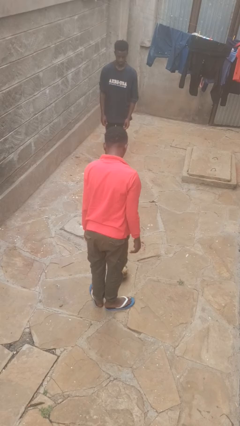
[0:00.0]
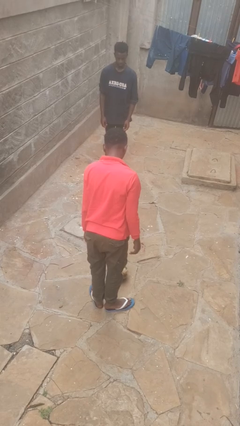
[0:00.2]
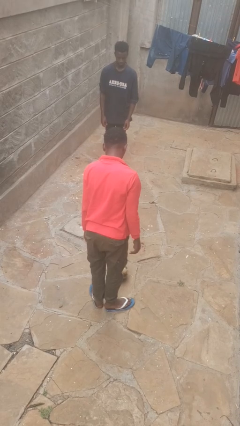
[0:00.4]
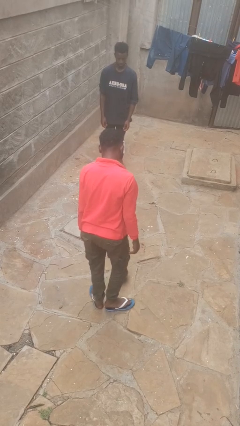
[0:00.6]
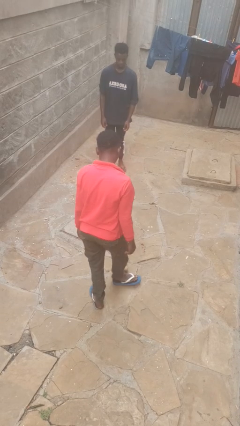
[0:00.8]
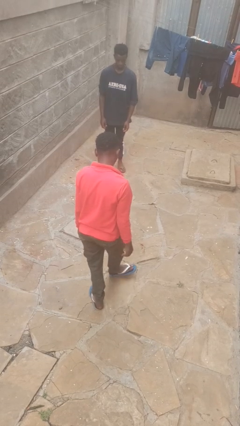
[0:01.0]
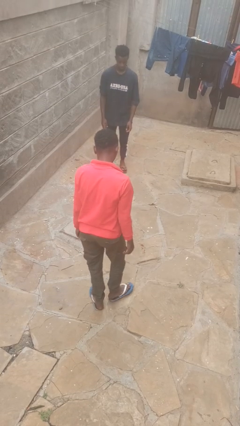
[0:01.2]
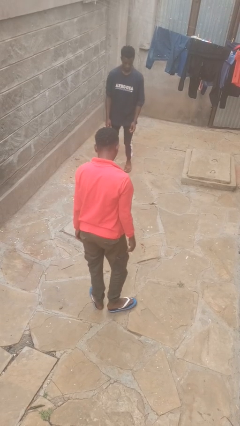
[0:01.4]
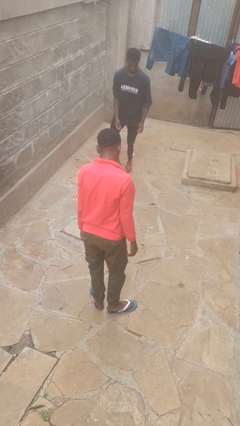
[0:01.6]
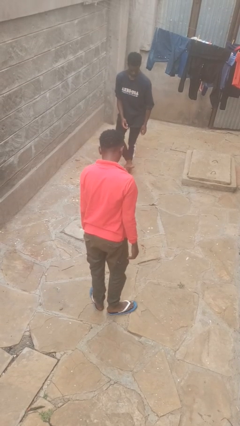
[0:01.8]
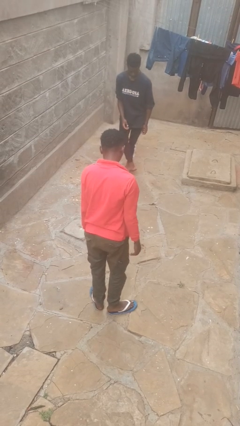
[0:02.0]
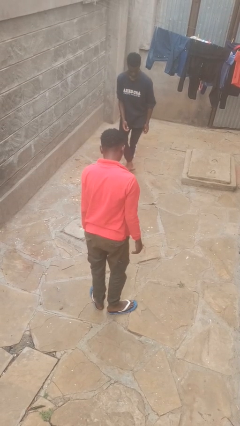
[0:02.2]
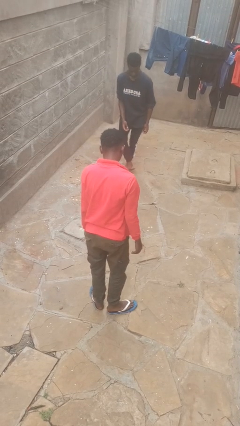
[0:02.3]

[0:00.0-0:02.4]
person kicks object to person

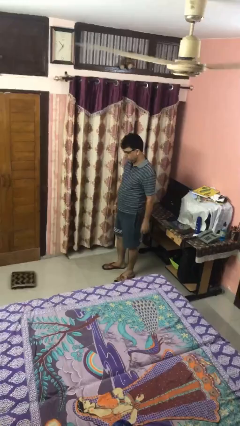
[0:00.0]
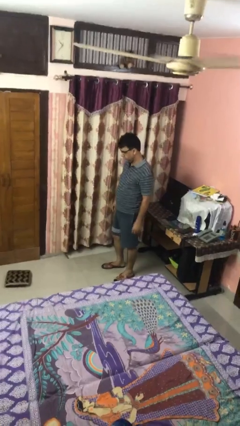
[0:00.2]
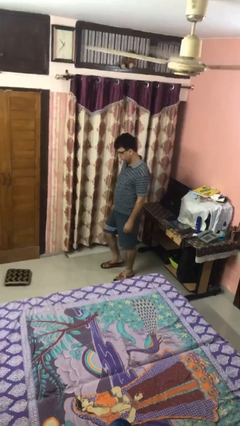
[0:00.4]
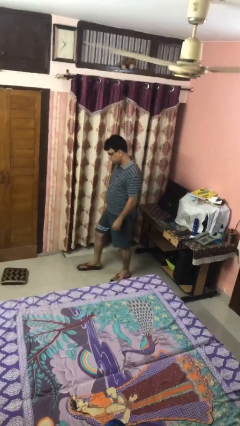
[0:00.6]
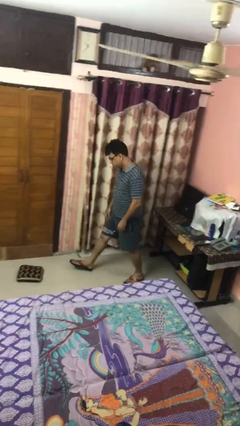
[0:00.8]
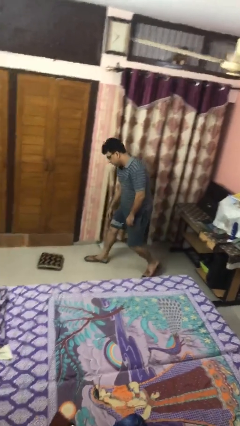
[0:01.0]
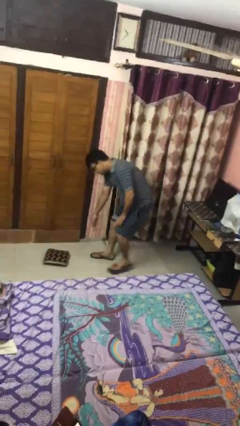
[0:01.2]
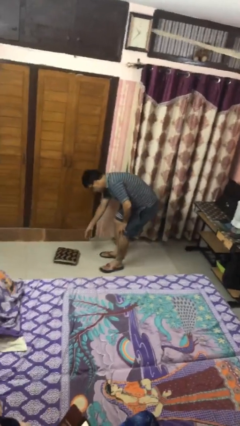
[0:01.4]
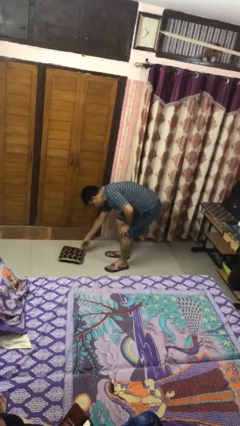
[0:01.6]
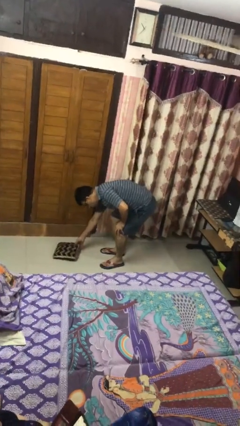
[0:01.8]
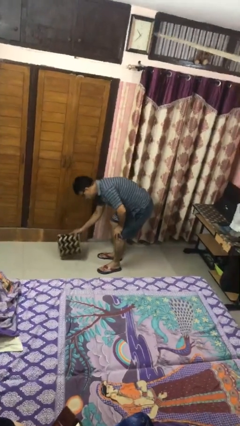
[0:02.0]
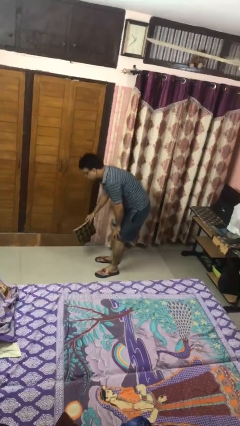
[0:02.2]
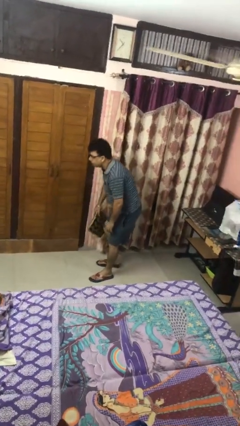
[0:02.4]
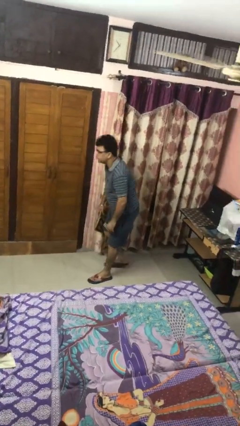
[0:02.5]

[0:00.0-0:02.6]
person picks up object from floor

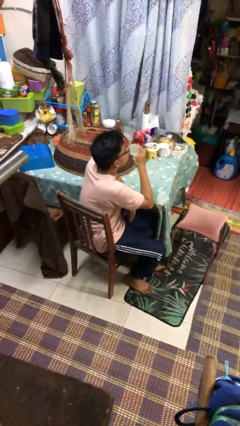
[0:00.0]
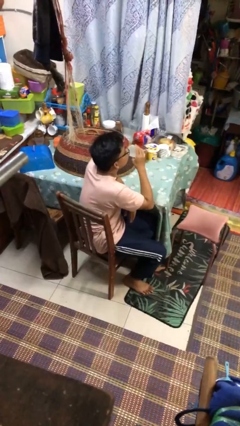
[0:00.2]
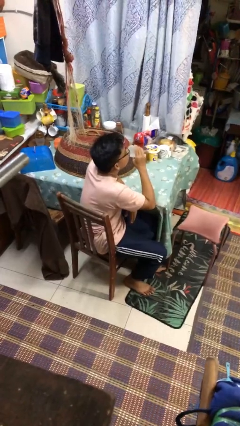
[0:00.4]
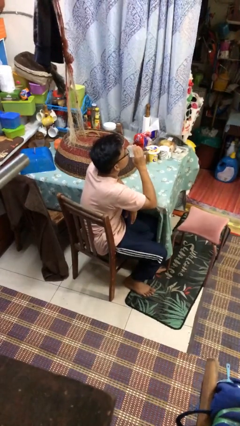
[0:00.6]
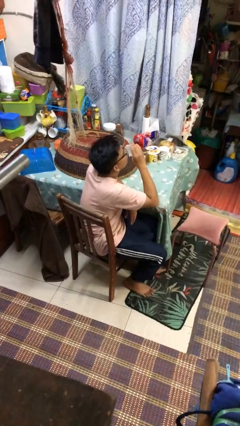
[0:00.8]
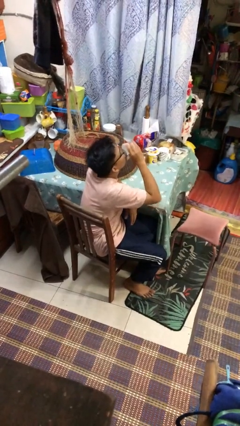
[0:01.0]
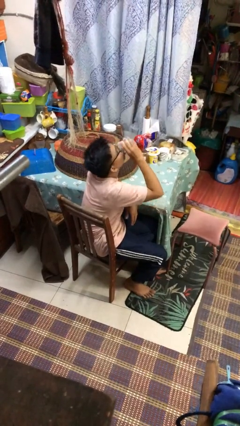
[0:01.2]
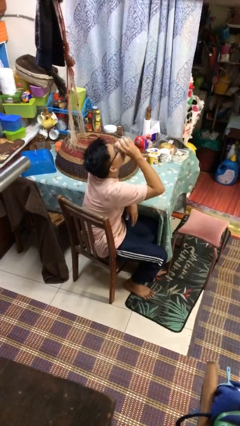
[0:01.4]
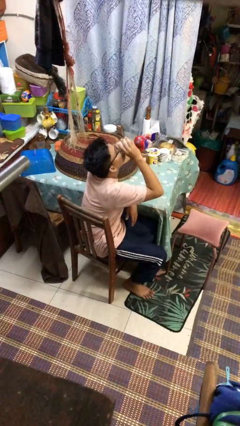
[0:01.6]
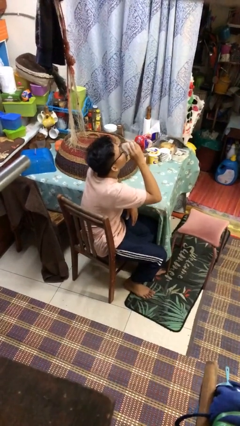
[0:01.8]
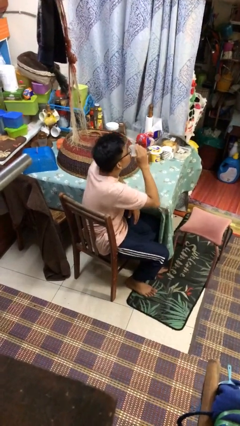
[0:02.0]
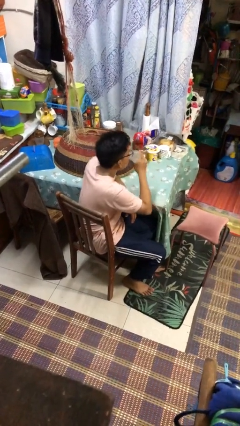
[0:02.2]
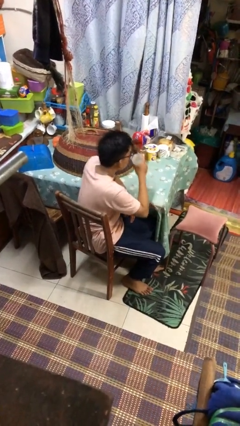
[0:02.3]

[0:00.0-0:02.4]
person drinks from shotglass

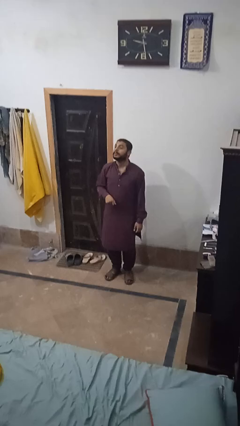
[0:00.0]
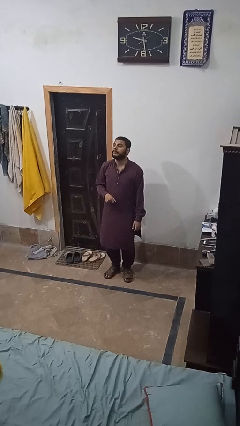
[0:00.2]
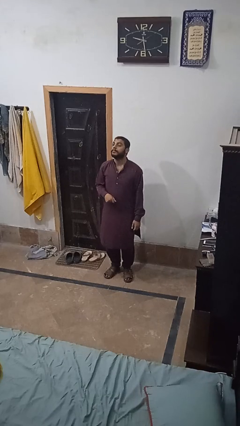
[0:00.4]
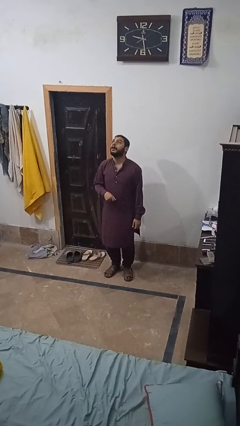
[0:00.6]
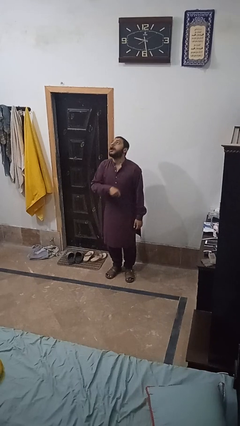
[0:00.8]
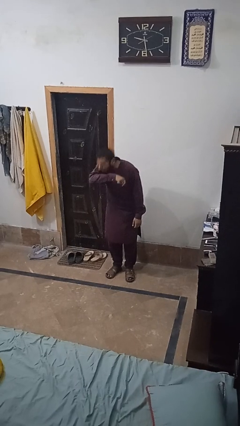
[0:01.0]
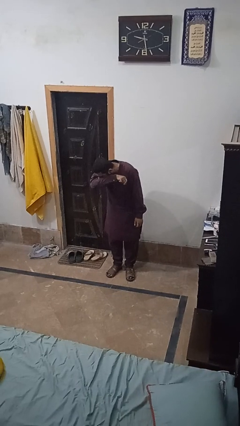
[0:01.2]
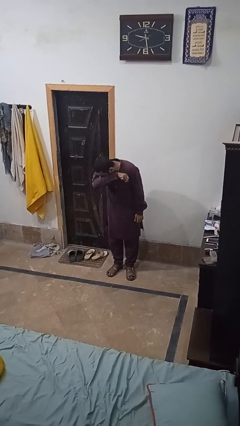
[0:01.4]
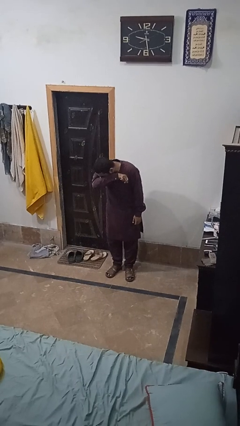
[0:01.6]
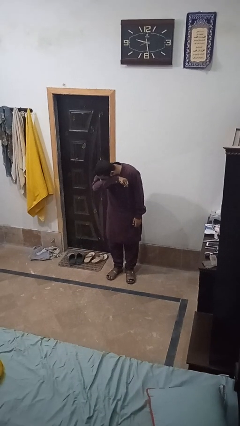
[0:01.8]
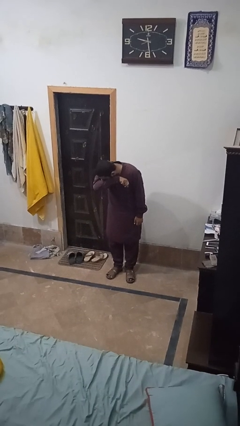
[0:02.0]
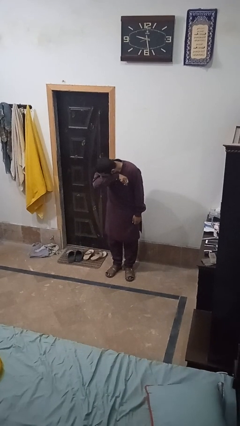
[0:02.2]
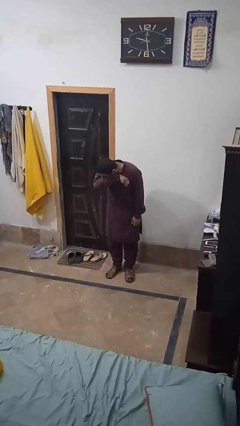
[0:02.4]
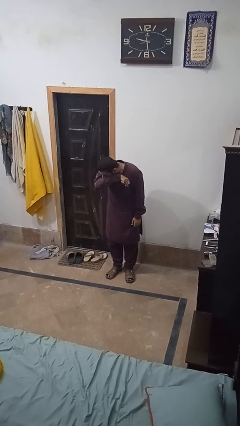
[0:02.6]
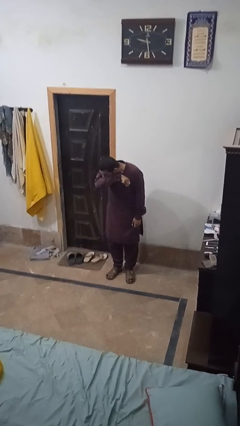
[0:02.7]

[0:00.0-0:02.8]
person sneezes into arm

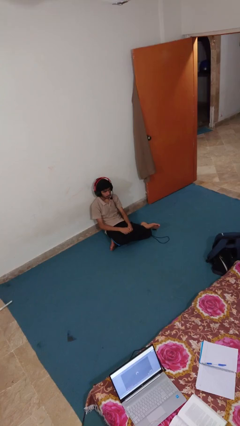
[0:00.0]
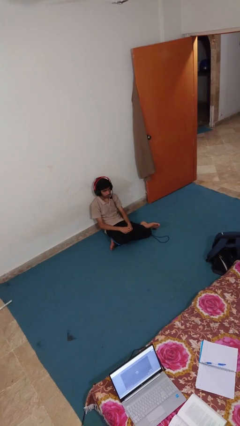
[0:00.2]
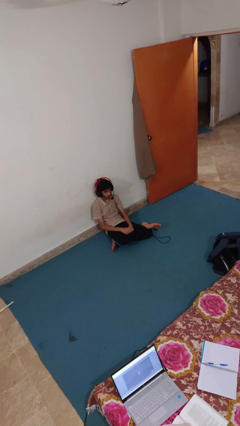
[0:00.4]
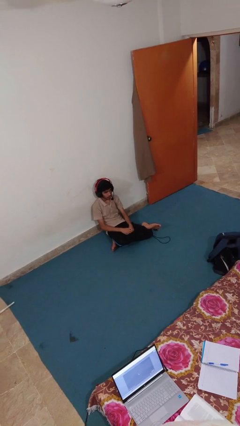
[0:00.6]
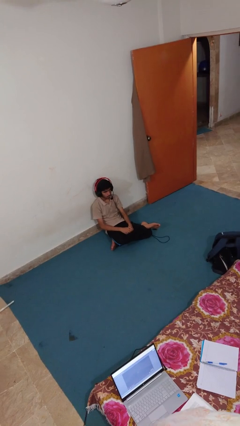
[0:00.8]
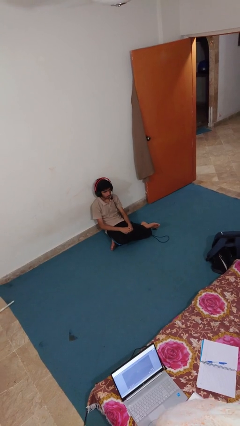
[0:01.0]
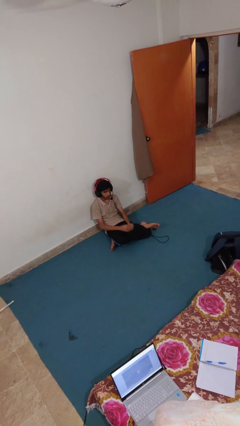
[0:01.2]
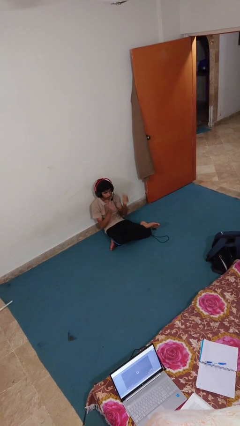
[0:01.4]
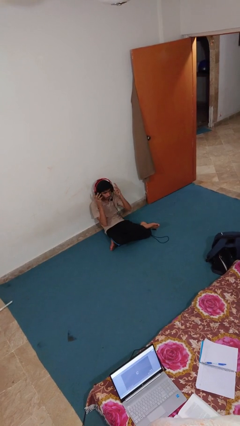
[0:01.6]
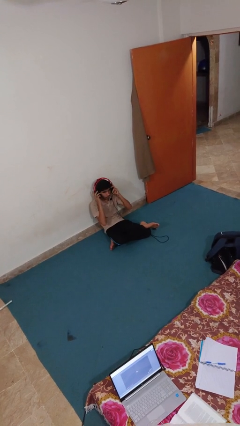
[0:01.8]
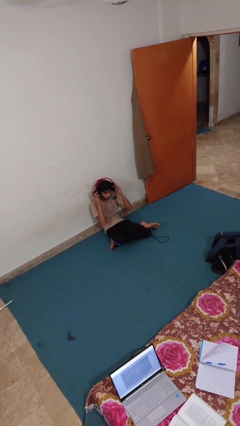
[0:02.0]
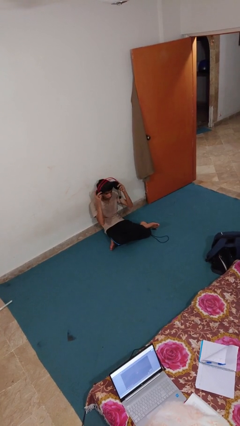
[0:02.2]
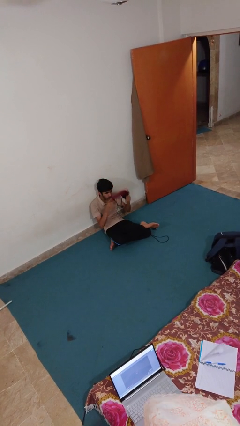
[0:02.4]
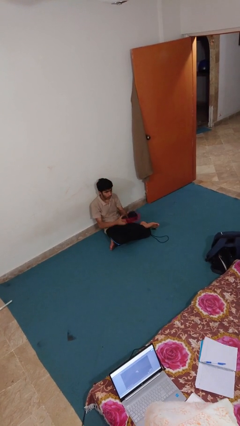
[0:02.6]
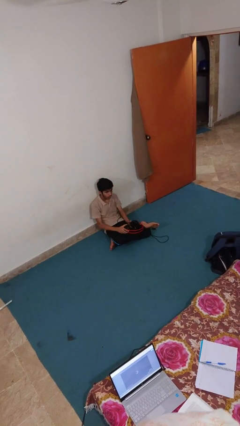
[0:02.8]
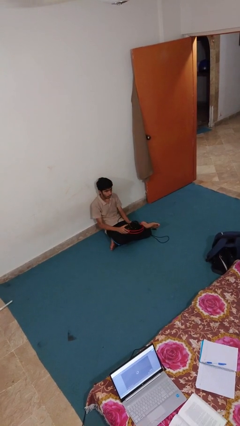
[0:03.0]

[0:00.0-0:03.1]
person takes off headphones

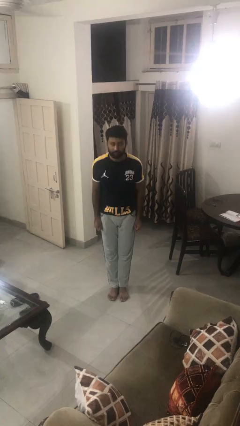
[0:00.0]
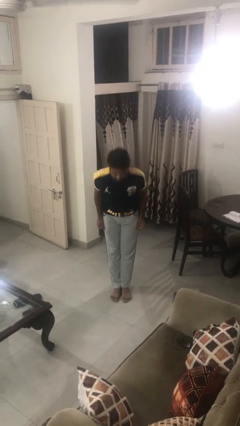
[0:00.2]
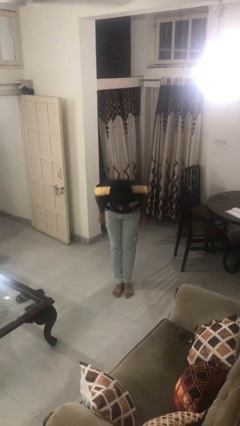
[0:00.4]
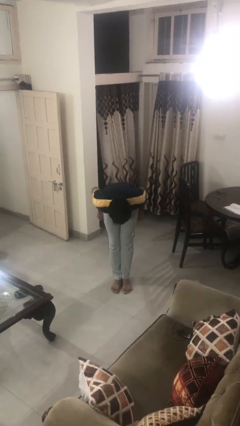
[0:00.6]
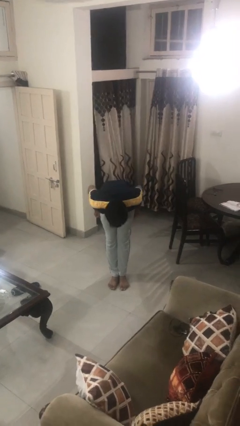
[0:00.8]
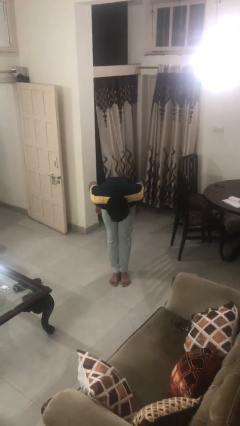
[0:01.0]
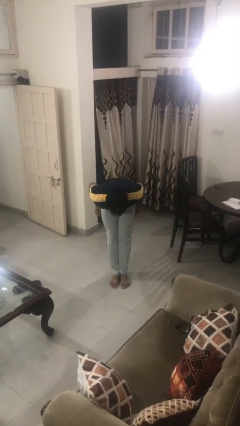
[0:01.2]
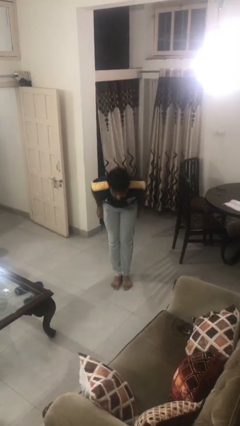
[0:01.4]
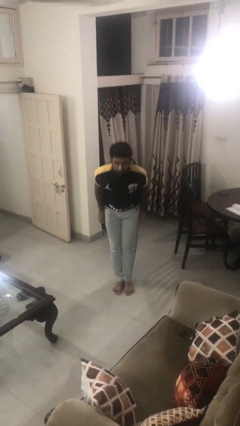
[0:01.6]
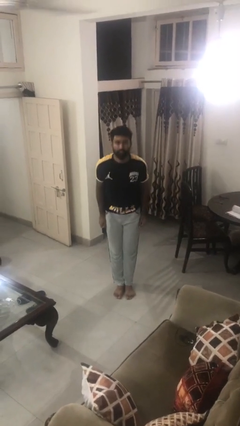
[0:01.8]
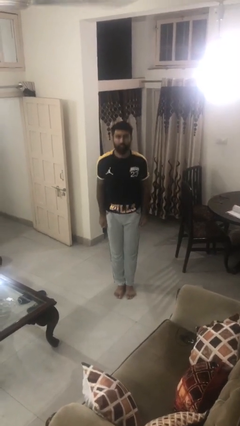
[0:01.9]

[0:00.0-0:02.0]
person bows

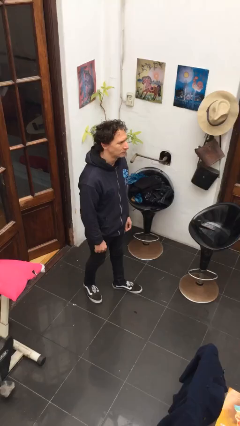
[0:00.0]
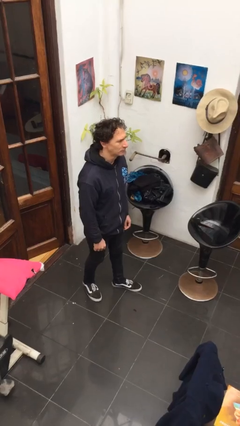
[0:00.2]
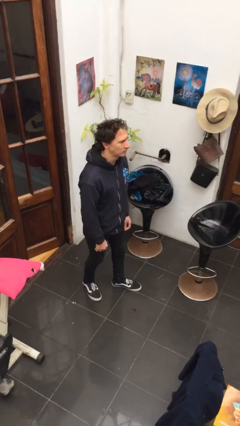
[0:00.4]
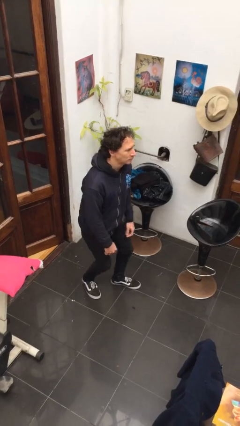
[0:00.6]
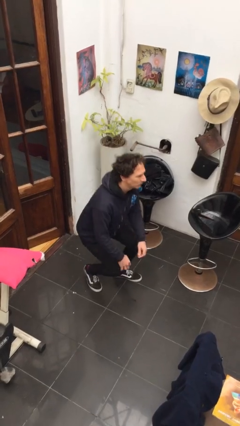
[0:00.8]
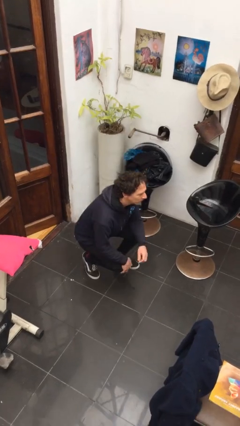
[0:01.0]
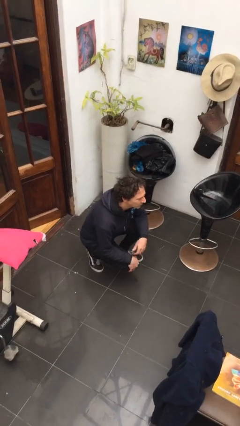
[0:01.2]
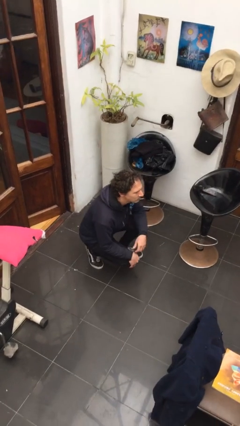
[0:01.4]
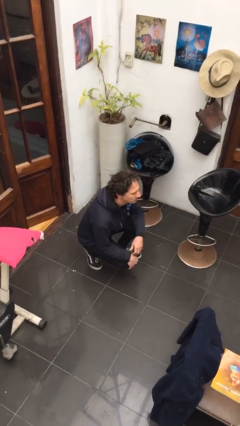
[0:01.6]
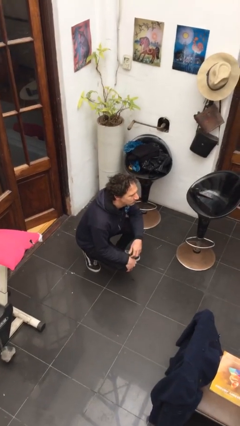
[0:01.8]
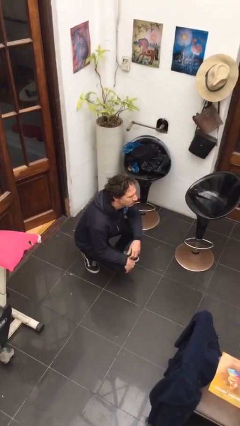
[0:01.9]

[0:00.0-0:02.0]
person squats

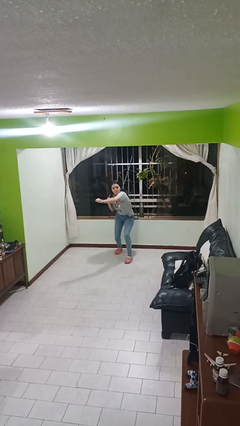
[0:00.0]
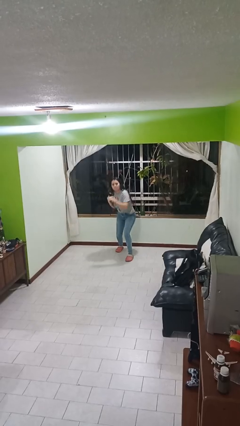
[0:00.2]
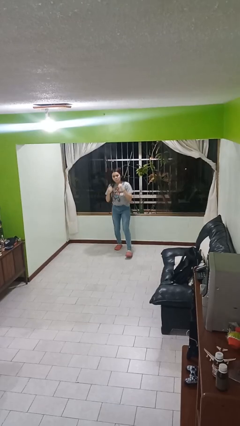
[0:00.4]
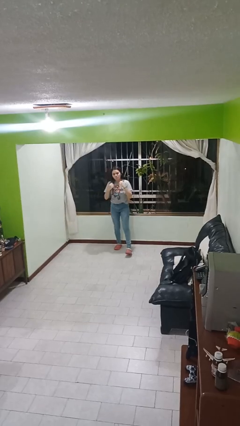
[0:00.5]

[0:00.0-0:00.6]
person punches
